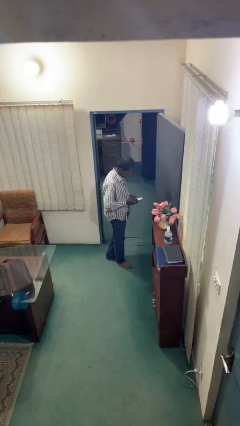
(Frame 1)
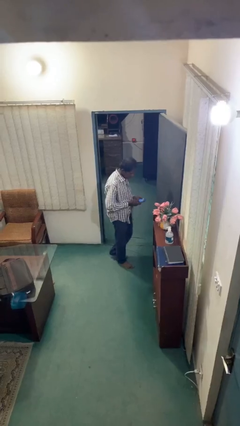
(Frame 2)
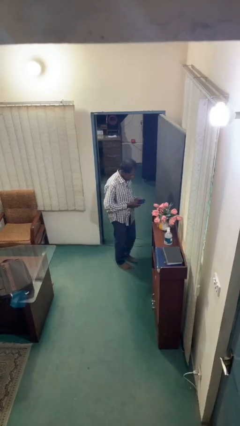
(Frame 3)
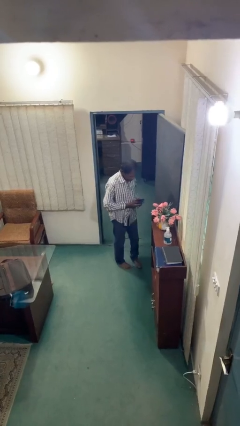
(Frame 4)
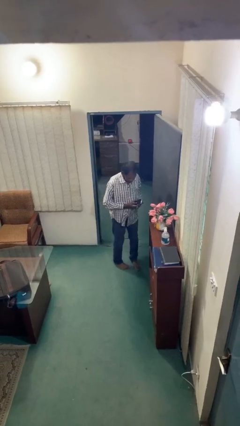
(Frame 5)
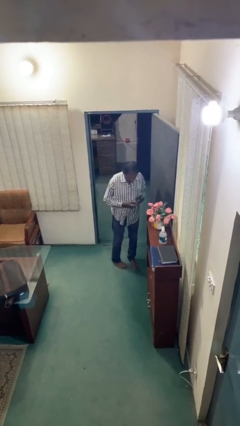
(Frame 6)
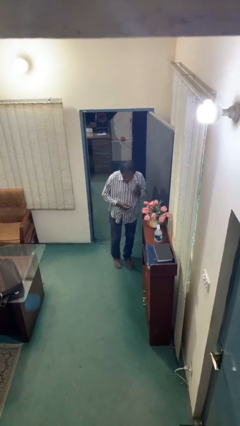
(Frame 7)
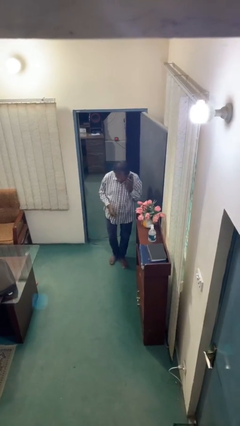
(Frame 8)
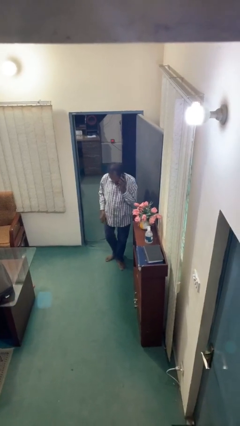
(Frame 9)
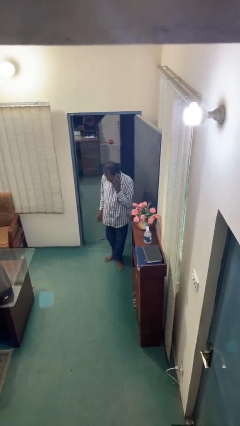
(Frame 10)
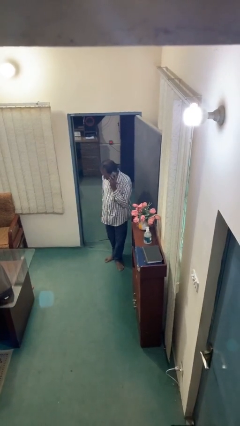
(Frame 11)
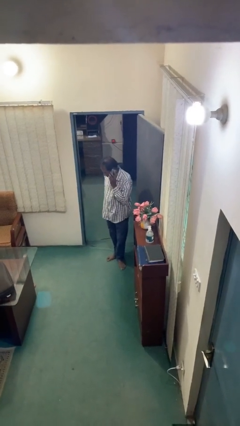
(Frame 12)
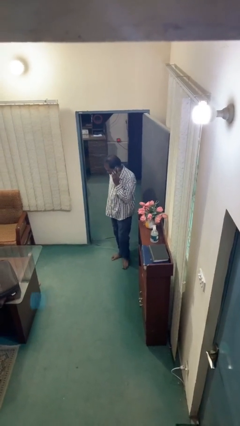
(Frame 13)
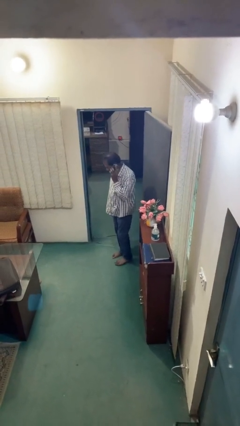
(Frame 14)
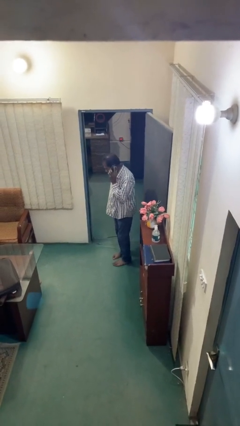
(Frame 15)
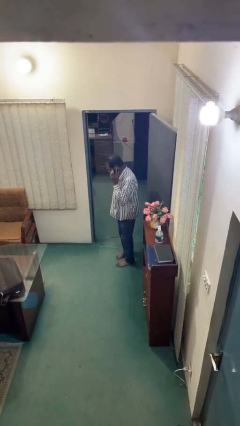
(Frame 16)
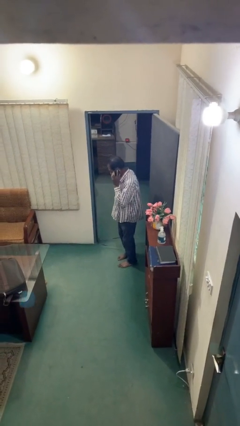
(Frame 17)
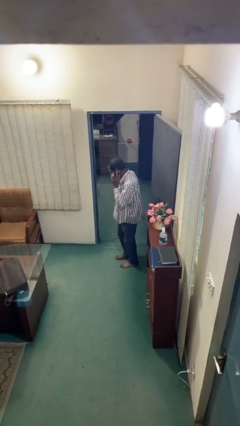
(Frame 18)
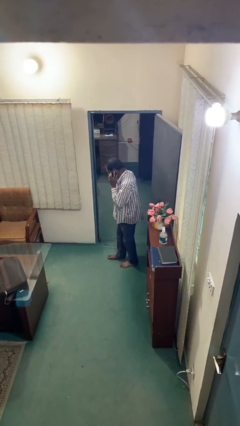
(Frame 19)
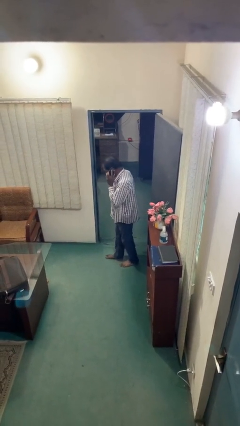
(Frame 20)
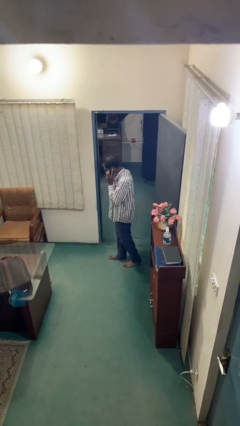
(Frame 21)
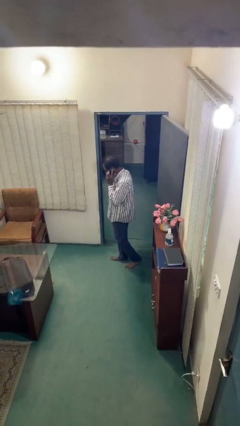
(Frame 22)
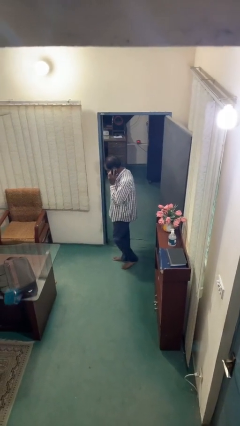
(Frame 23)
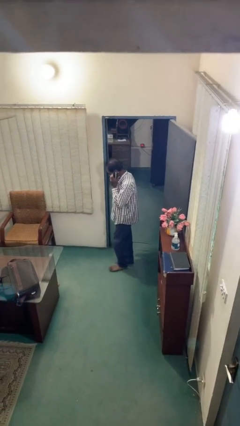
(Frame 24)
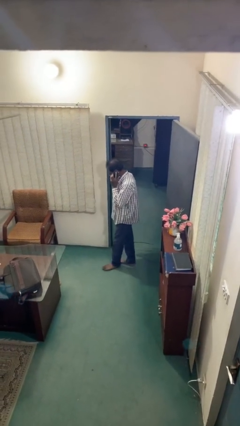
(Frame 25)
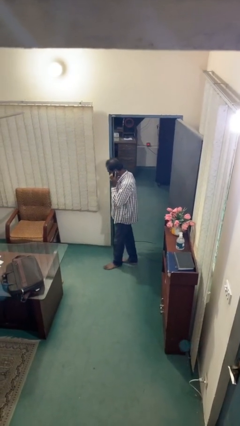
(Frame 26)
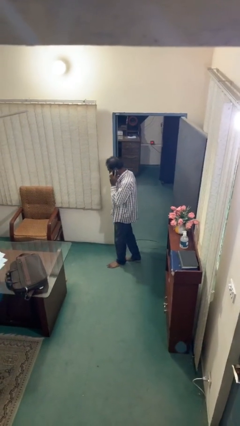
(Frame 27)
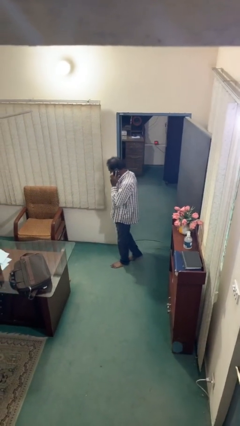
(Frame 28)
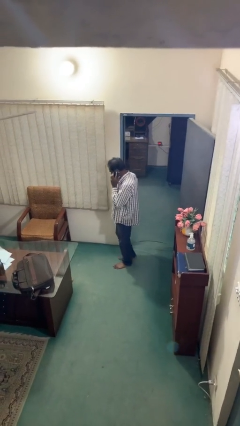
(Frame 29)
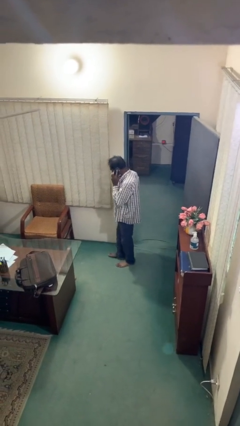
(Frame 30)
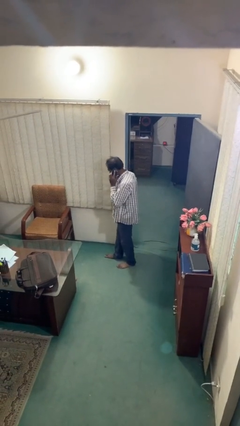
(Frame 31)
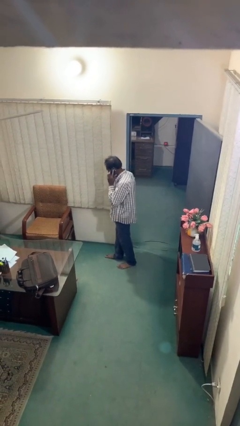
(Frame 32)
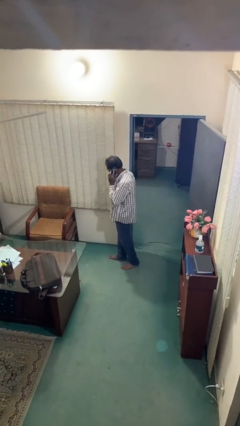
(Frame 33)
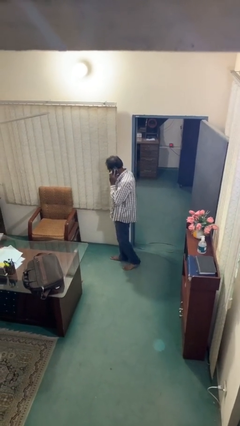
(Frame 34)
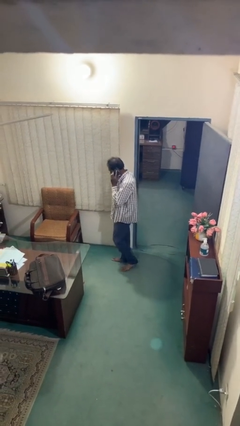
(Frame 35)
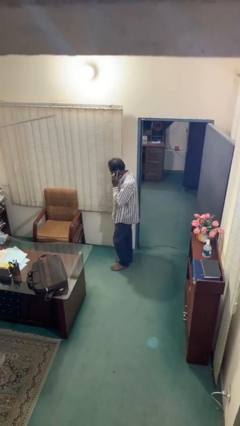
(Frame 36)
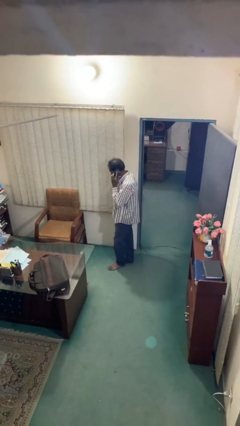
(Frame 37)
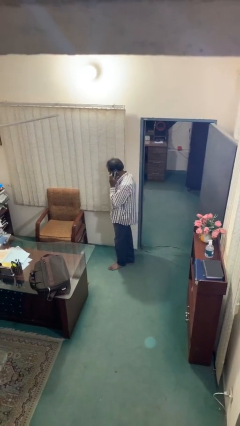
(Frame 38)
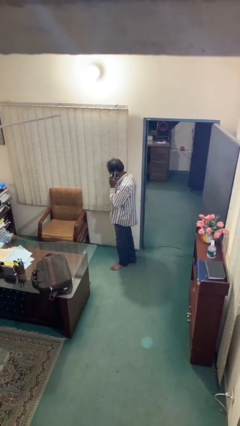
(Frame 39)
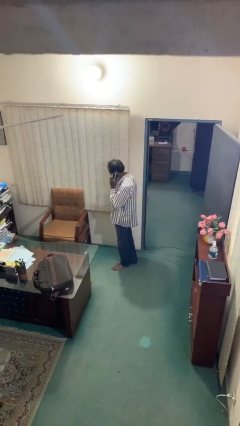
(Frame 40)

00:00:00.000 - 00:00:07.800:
person talks on phone

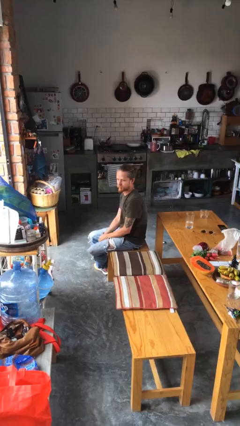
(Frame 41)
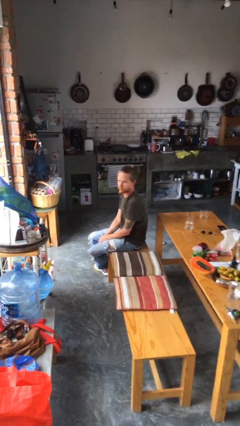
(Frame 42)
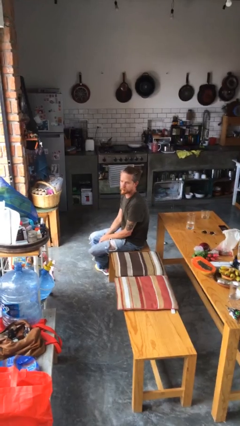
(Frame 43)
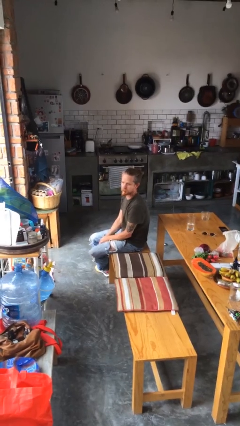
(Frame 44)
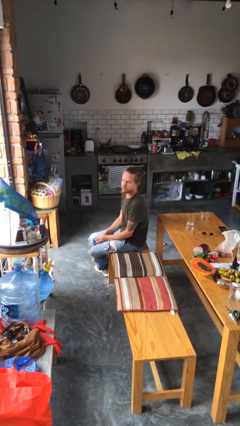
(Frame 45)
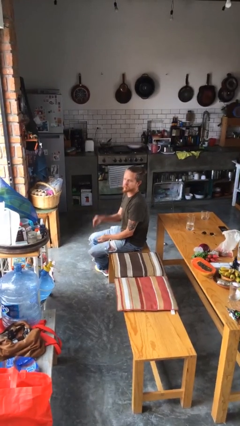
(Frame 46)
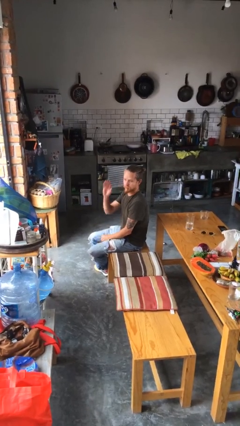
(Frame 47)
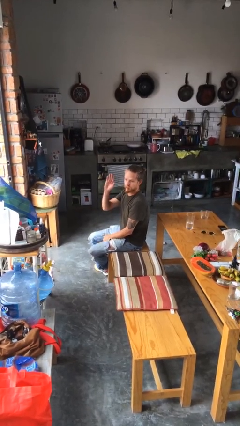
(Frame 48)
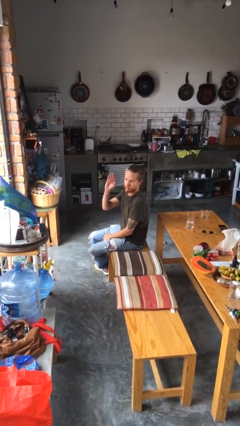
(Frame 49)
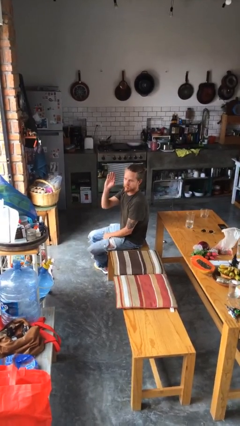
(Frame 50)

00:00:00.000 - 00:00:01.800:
person gestures raise hand

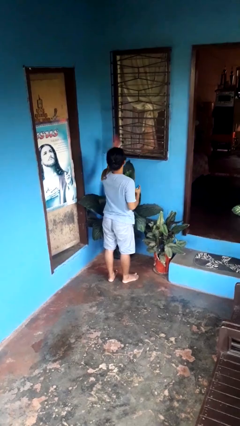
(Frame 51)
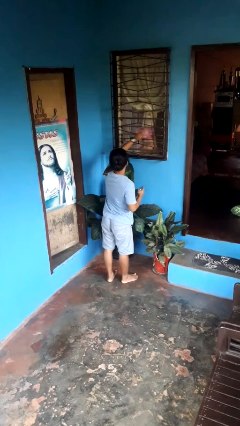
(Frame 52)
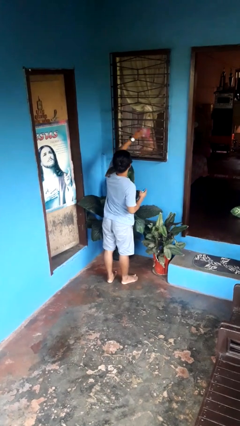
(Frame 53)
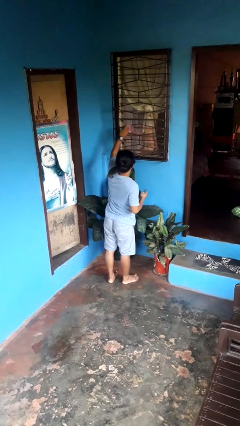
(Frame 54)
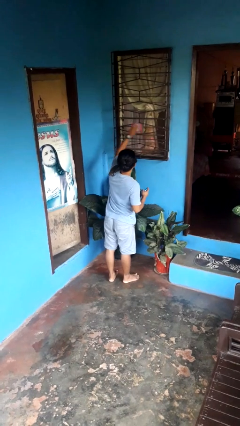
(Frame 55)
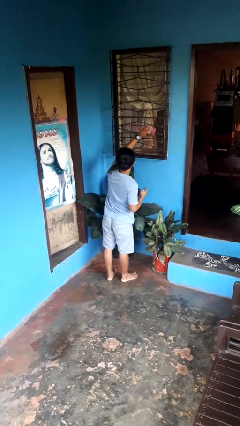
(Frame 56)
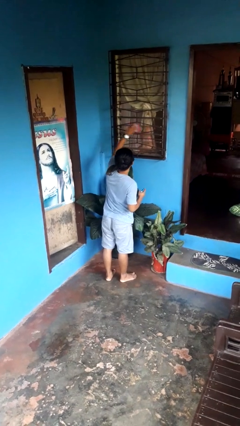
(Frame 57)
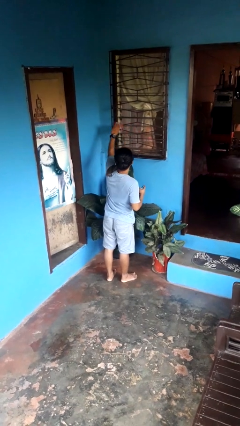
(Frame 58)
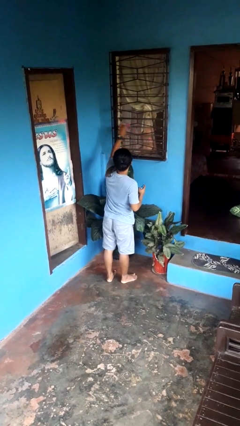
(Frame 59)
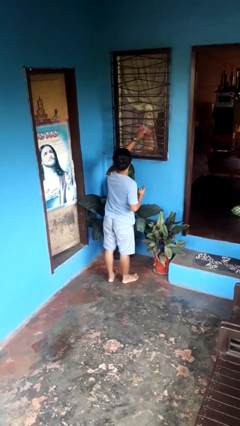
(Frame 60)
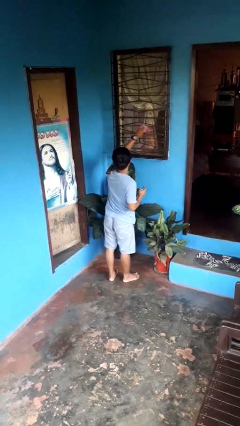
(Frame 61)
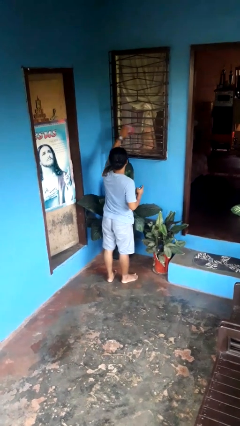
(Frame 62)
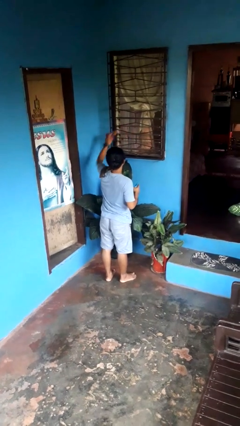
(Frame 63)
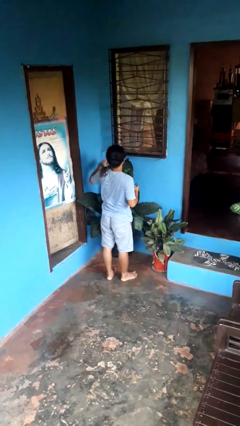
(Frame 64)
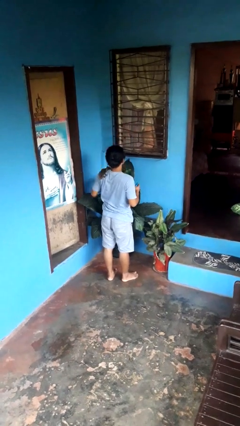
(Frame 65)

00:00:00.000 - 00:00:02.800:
person washes window

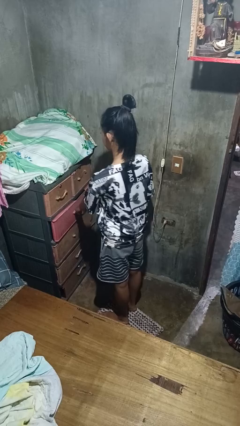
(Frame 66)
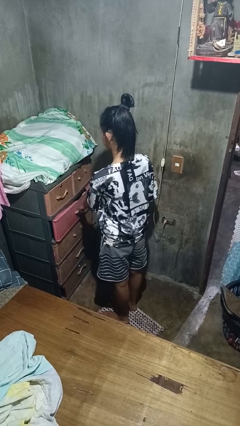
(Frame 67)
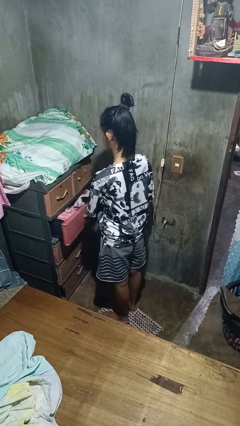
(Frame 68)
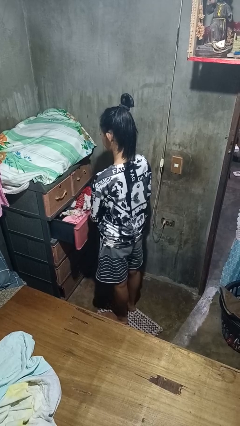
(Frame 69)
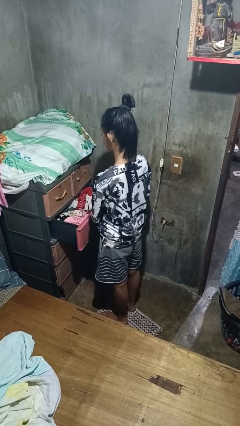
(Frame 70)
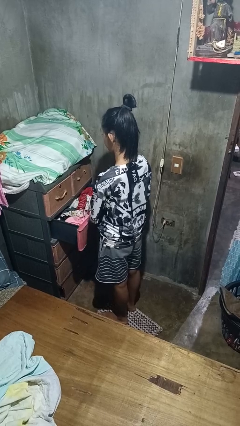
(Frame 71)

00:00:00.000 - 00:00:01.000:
person opens dresser drawer

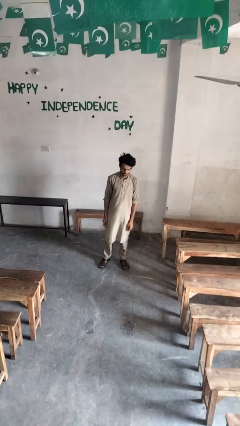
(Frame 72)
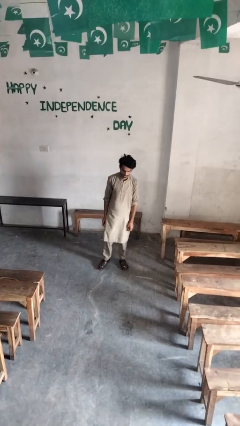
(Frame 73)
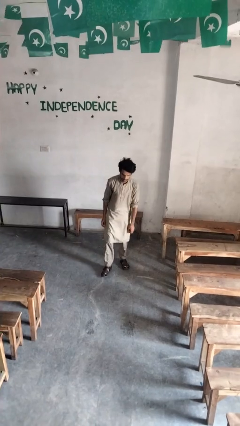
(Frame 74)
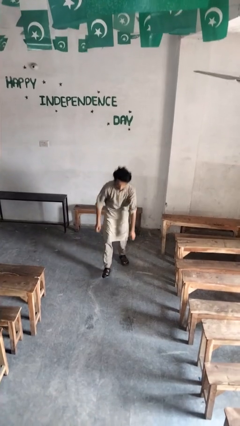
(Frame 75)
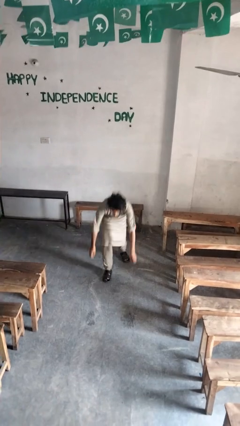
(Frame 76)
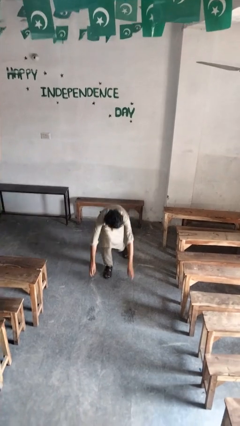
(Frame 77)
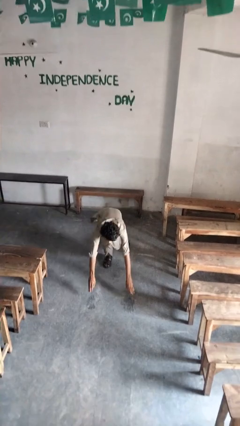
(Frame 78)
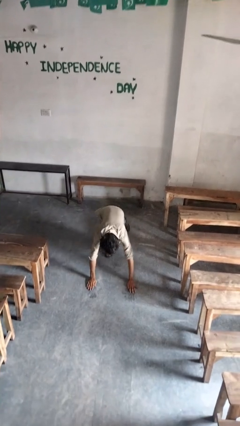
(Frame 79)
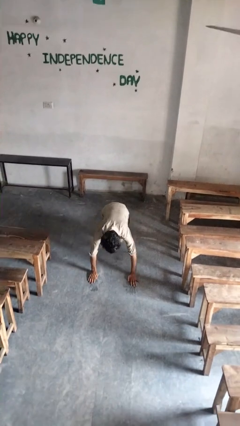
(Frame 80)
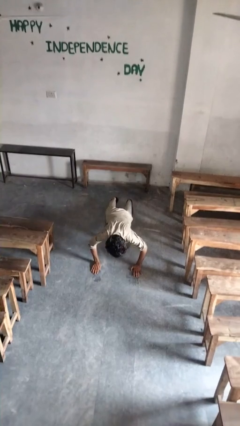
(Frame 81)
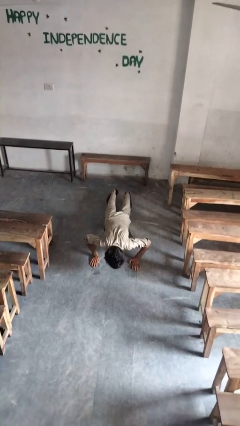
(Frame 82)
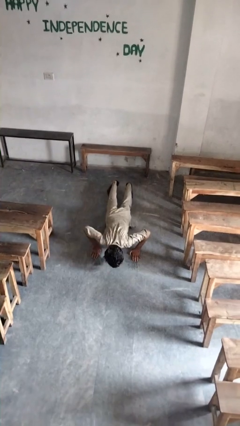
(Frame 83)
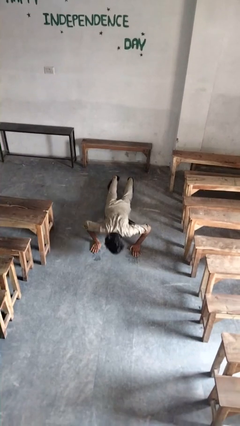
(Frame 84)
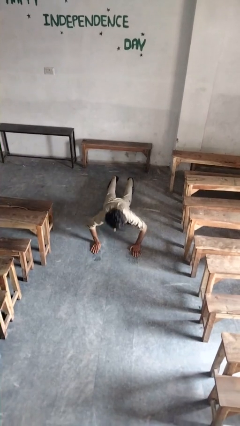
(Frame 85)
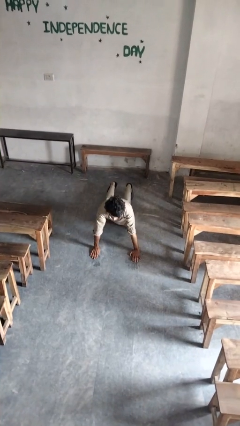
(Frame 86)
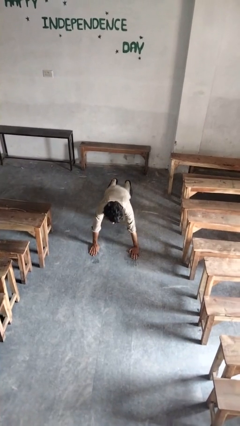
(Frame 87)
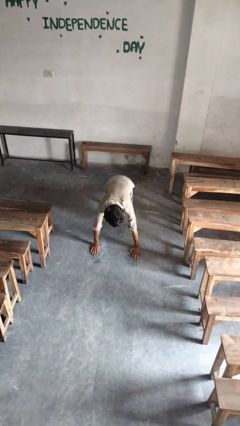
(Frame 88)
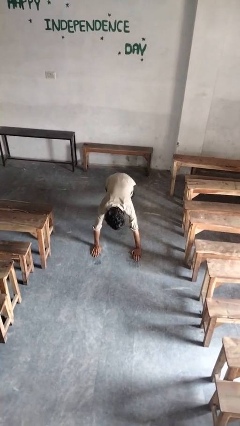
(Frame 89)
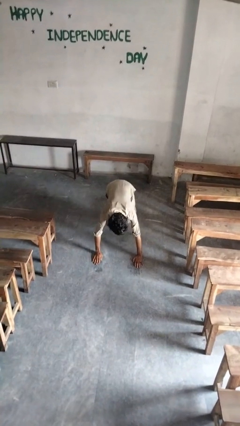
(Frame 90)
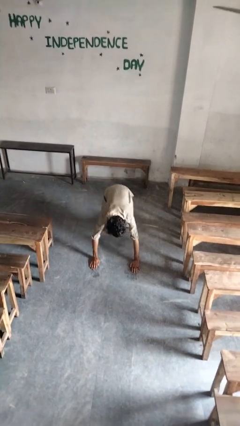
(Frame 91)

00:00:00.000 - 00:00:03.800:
person exercises with pushup
